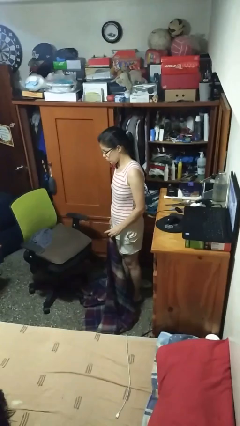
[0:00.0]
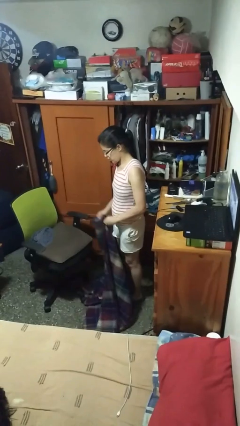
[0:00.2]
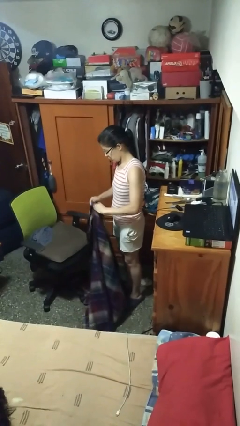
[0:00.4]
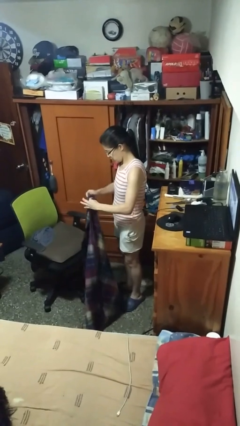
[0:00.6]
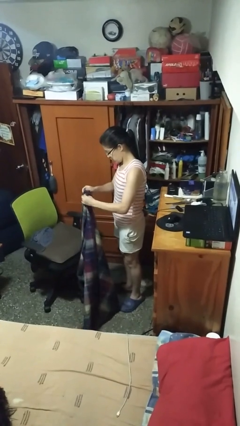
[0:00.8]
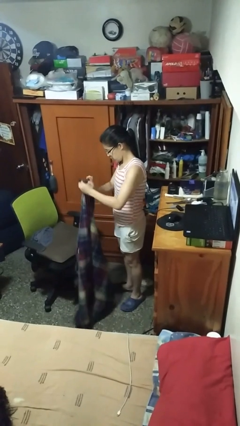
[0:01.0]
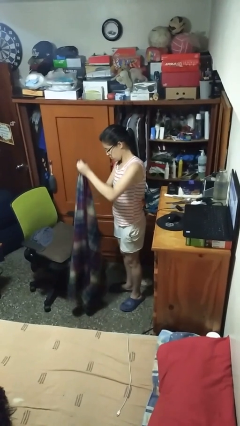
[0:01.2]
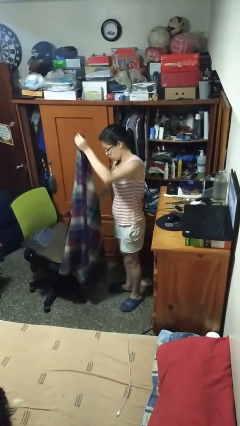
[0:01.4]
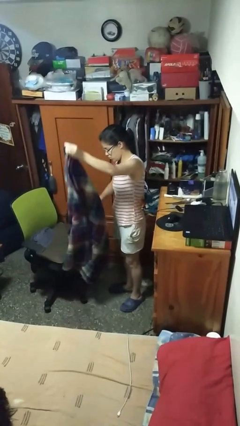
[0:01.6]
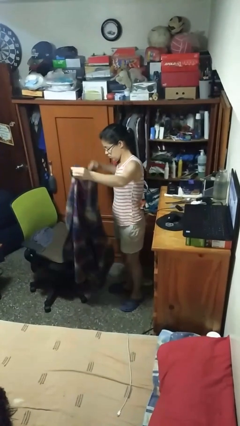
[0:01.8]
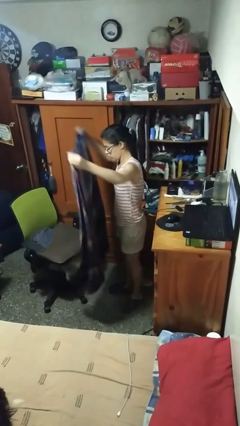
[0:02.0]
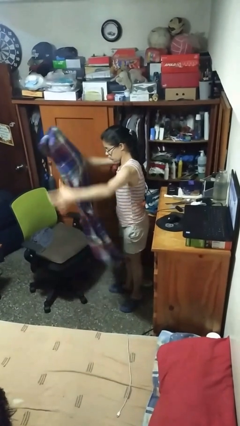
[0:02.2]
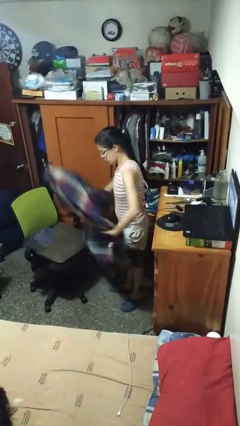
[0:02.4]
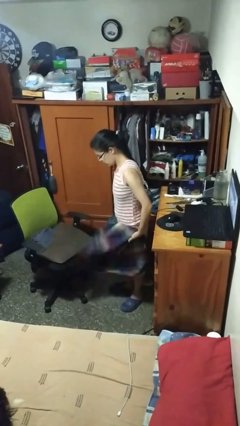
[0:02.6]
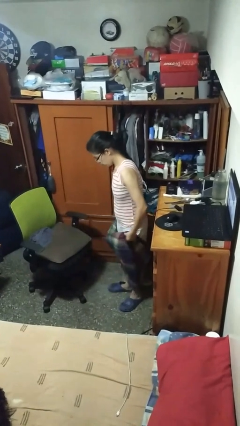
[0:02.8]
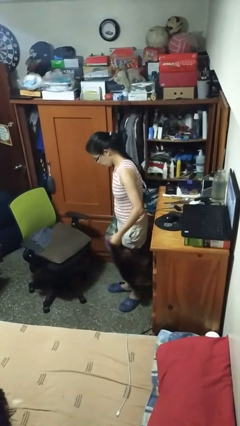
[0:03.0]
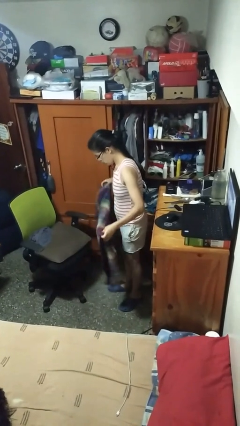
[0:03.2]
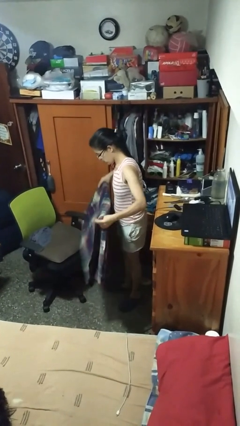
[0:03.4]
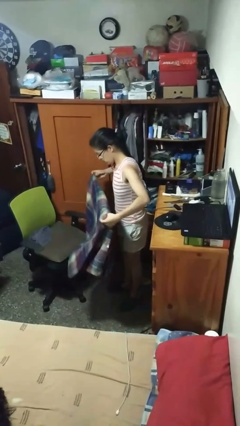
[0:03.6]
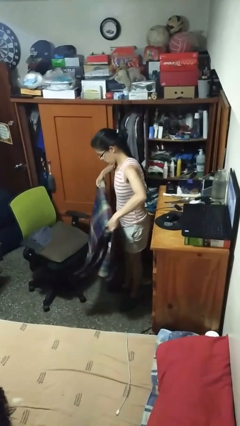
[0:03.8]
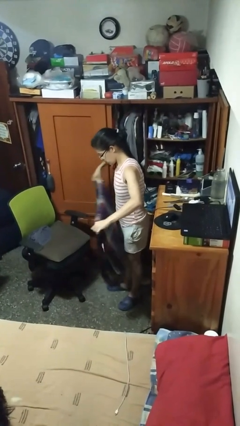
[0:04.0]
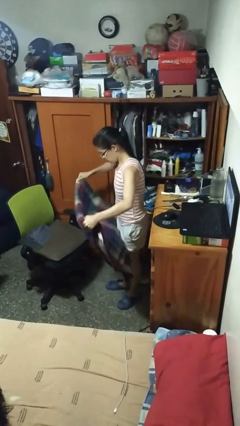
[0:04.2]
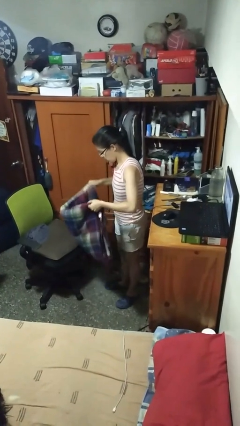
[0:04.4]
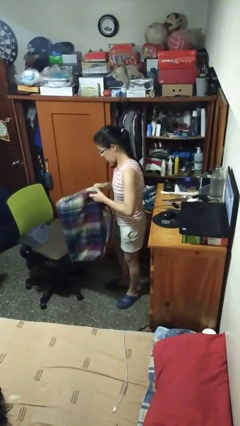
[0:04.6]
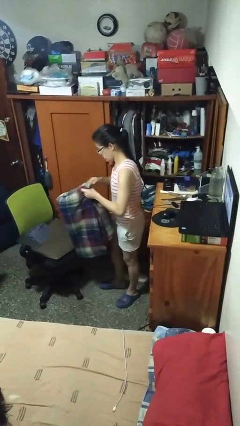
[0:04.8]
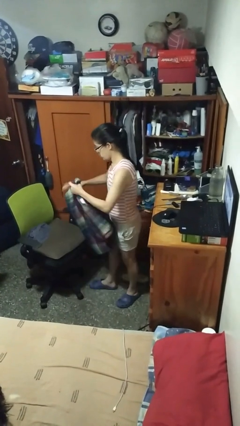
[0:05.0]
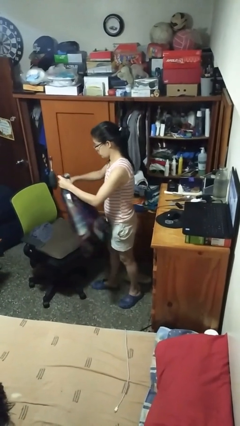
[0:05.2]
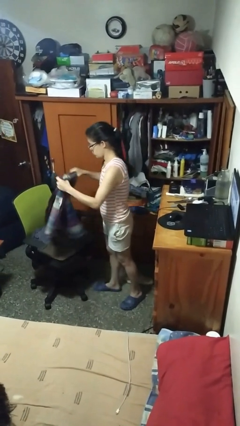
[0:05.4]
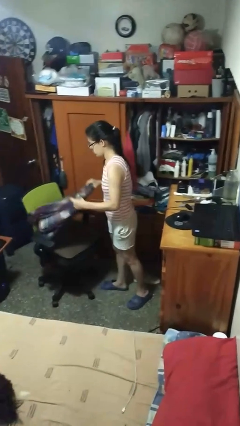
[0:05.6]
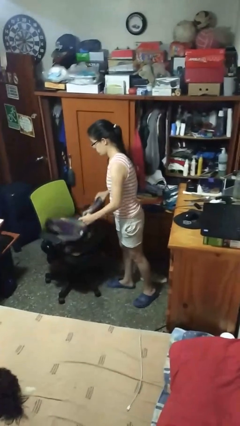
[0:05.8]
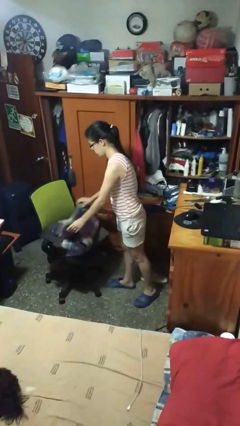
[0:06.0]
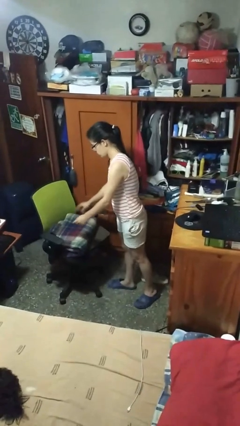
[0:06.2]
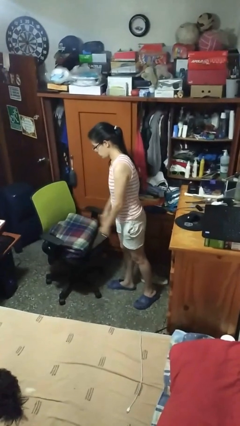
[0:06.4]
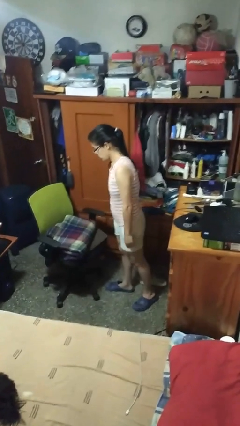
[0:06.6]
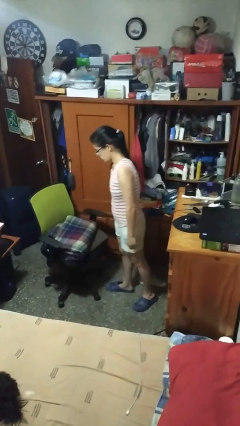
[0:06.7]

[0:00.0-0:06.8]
person folds blanket

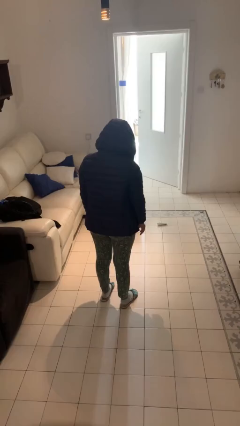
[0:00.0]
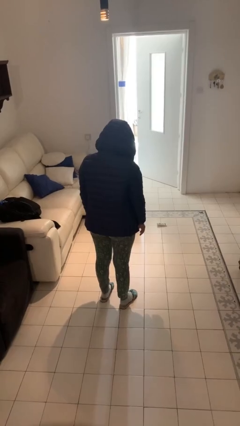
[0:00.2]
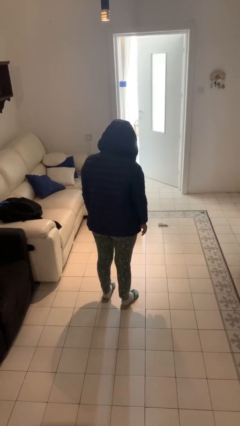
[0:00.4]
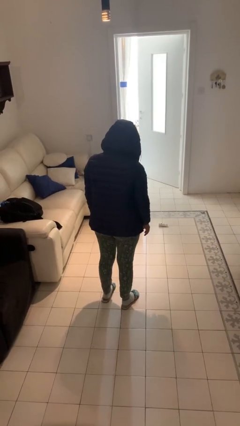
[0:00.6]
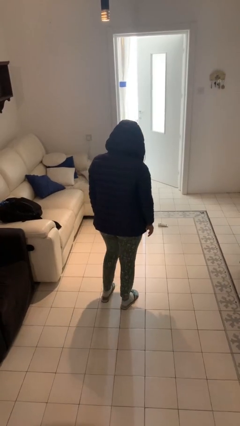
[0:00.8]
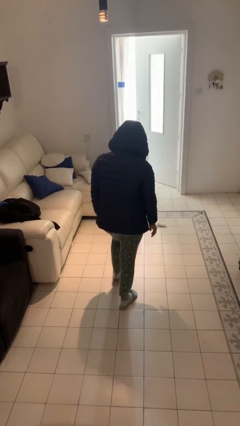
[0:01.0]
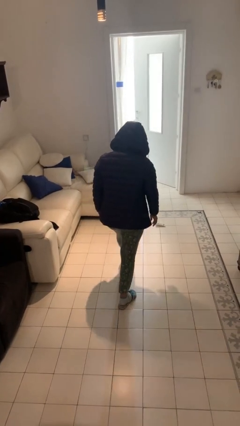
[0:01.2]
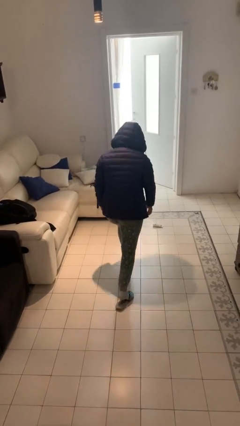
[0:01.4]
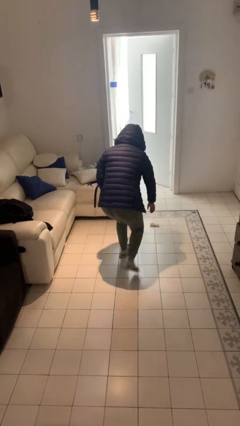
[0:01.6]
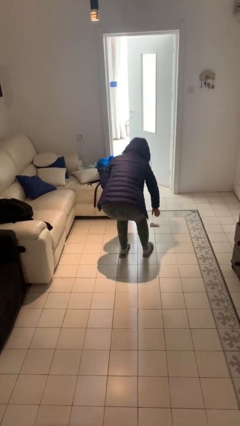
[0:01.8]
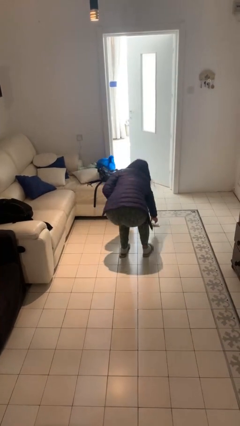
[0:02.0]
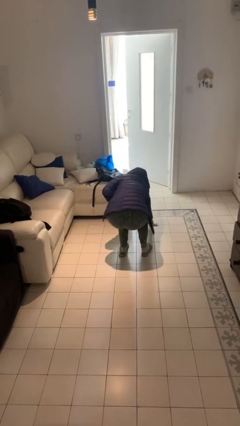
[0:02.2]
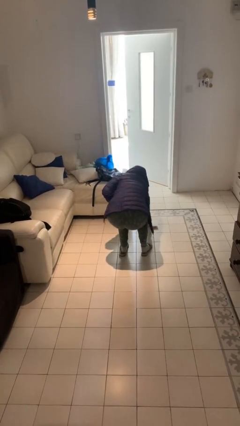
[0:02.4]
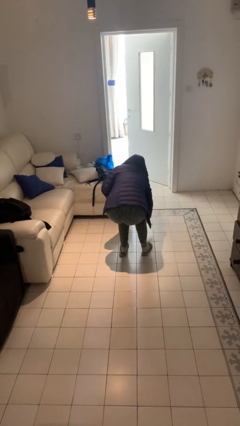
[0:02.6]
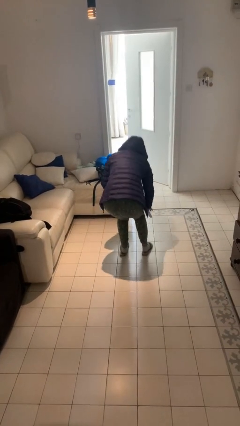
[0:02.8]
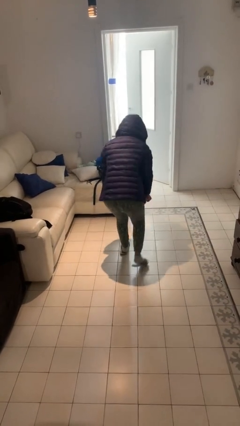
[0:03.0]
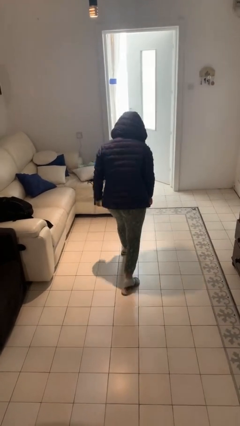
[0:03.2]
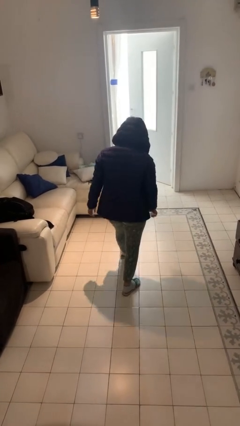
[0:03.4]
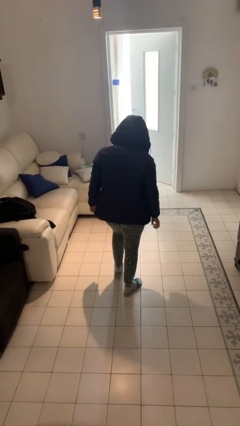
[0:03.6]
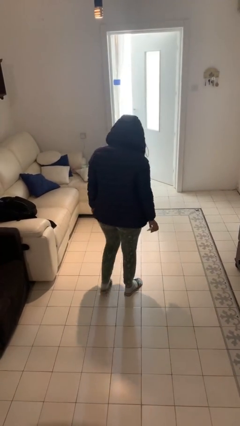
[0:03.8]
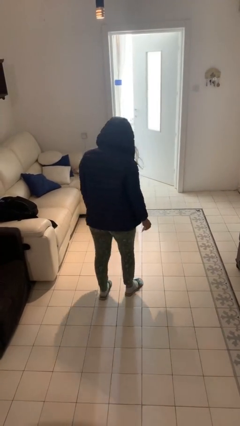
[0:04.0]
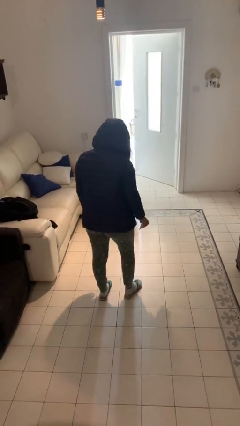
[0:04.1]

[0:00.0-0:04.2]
person picks up object from floor

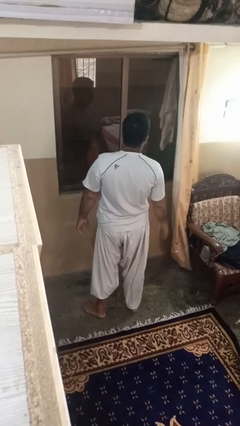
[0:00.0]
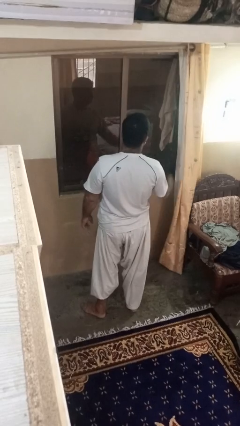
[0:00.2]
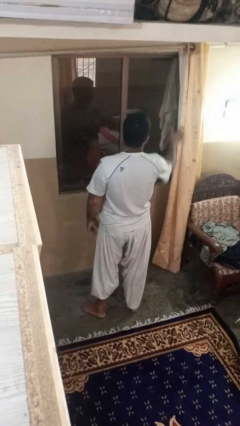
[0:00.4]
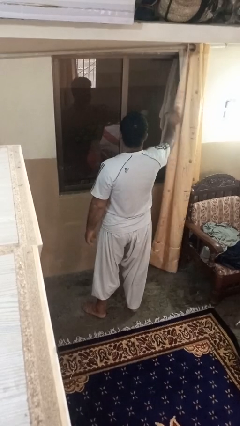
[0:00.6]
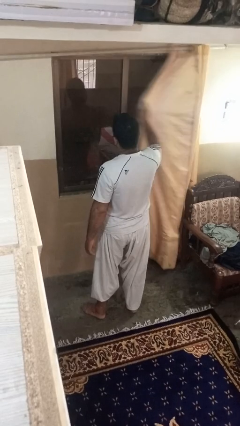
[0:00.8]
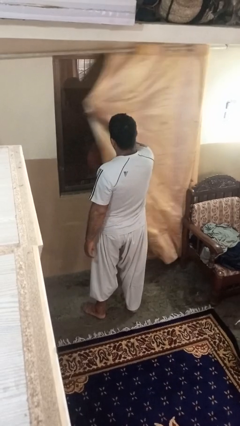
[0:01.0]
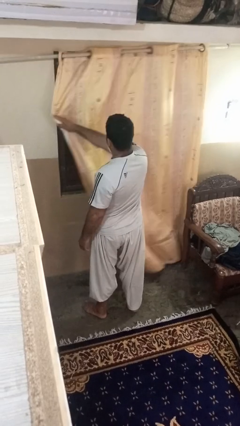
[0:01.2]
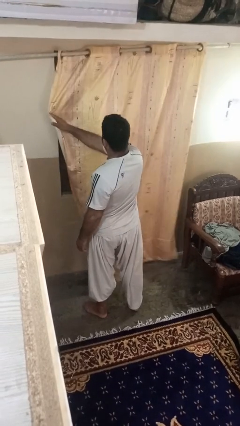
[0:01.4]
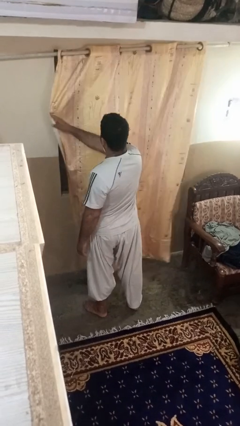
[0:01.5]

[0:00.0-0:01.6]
person closes curtains

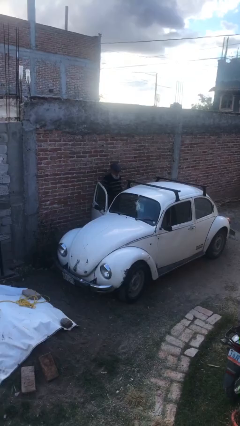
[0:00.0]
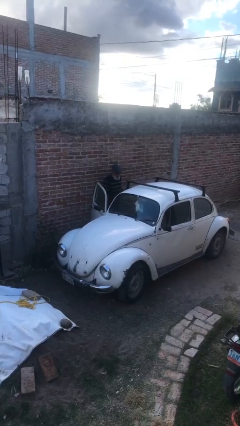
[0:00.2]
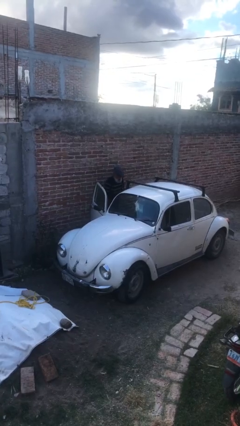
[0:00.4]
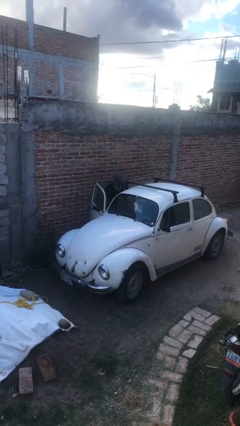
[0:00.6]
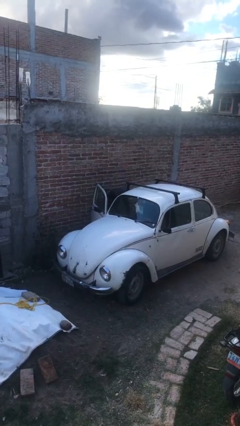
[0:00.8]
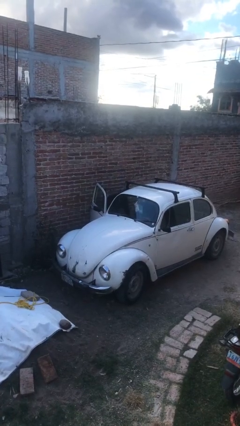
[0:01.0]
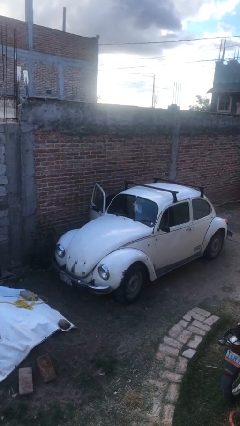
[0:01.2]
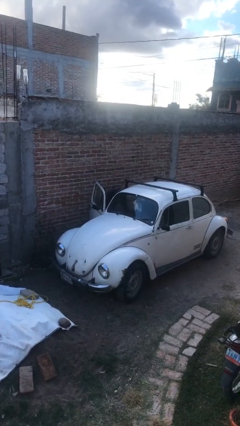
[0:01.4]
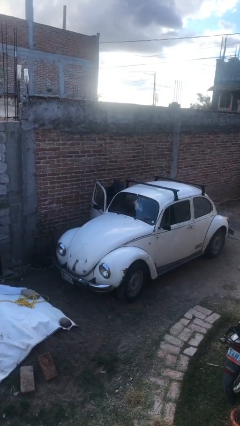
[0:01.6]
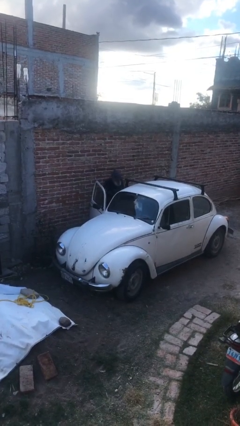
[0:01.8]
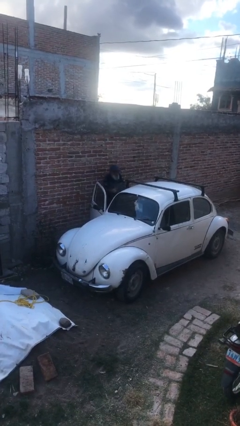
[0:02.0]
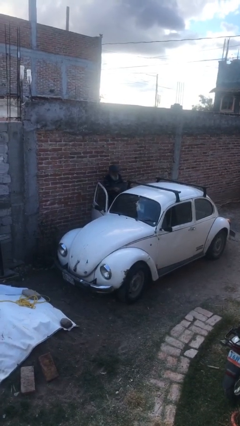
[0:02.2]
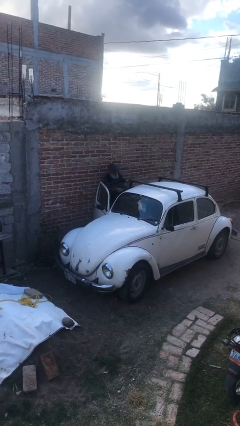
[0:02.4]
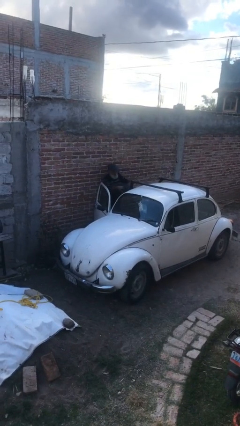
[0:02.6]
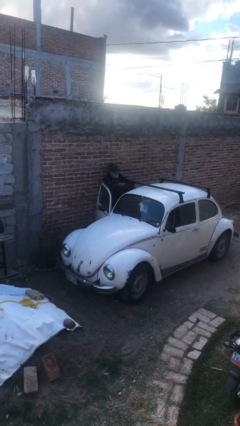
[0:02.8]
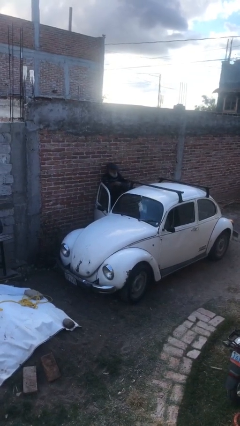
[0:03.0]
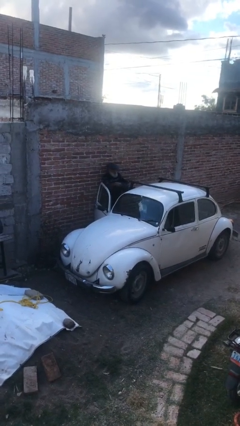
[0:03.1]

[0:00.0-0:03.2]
person unloads car

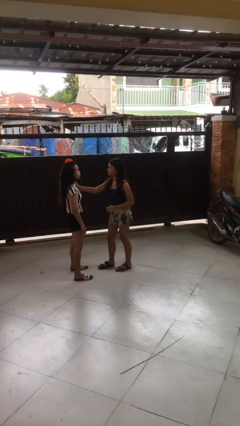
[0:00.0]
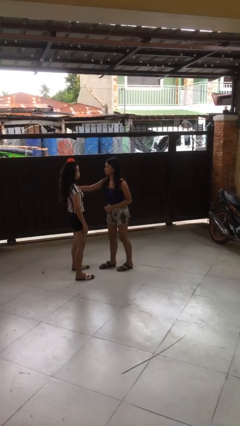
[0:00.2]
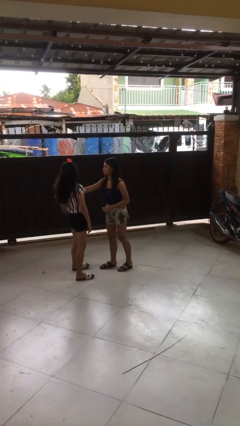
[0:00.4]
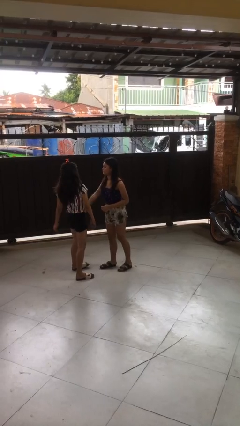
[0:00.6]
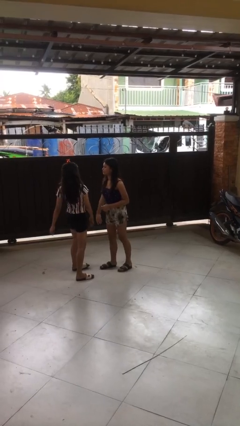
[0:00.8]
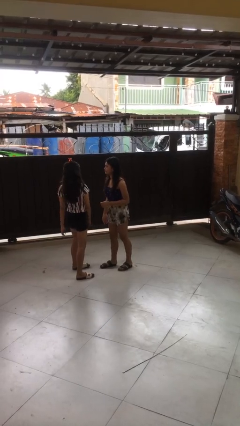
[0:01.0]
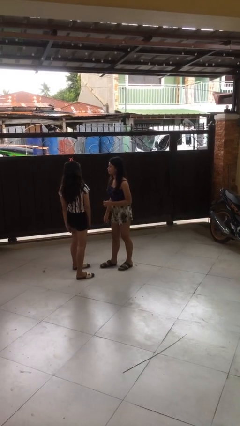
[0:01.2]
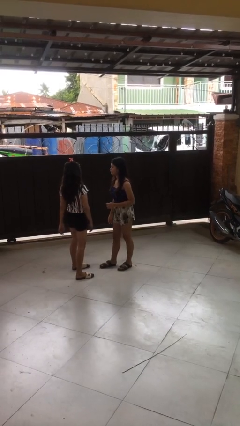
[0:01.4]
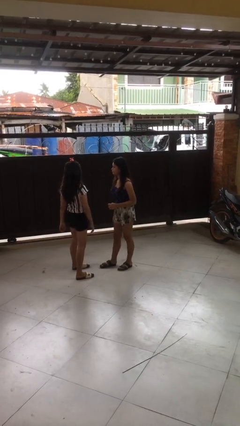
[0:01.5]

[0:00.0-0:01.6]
person shoves person
